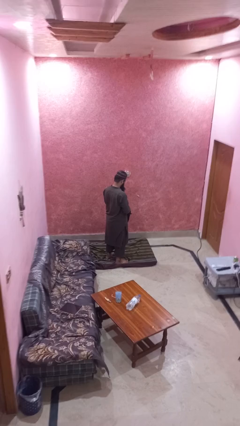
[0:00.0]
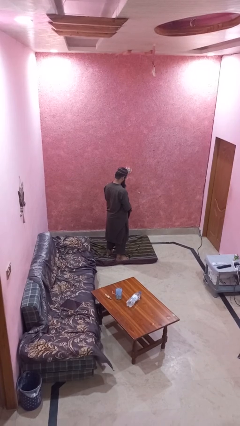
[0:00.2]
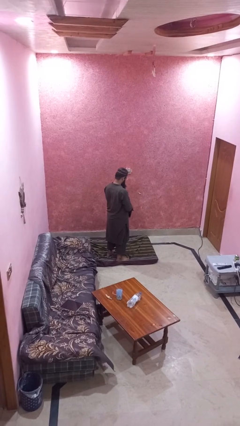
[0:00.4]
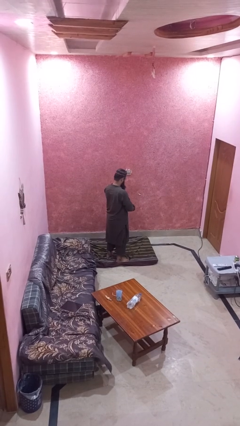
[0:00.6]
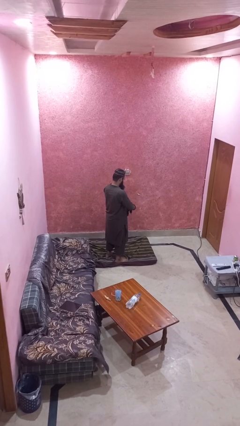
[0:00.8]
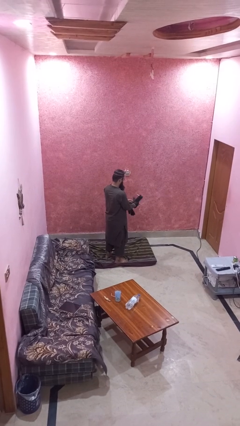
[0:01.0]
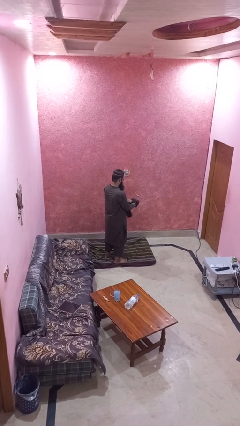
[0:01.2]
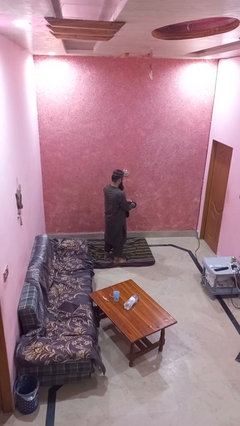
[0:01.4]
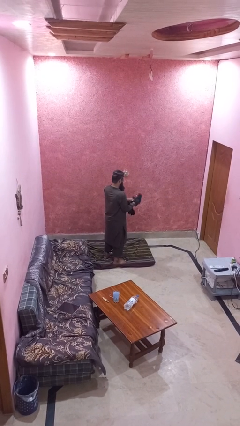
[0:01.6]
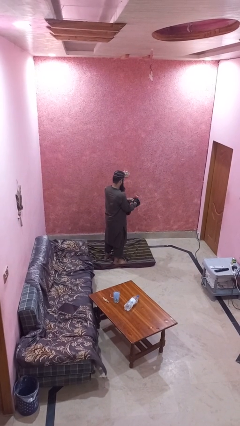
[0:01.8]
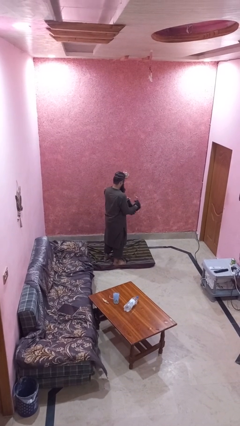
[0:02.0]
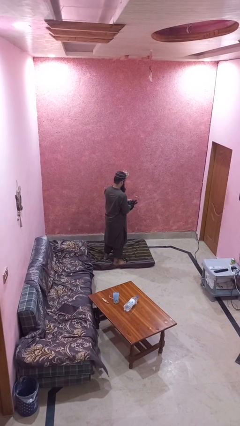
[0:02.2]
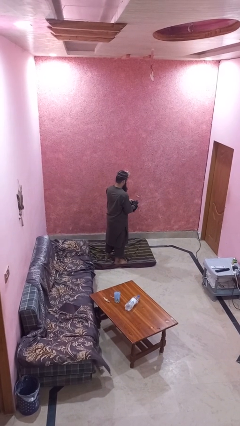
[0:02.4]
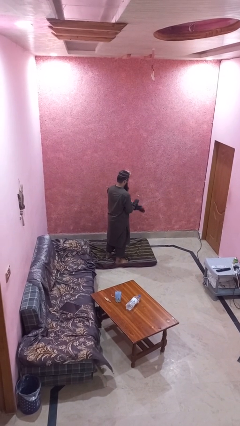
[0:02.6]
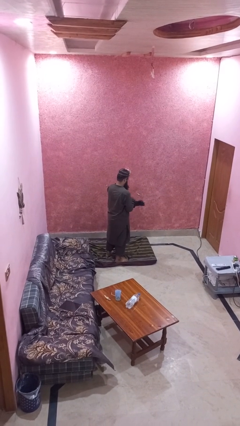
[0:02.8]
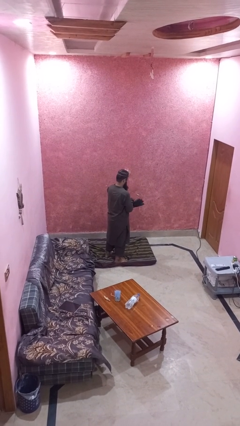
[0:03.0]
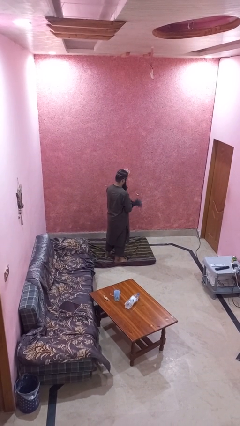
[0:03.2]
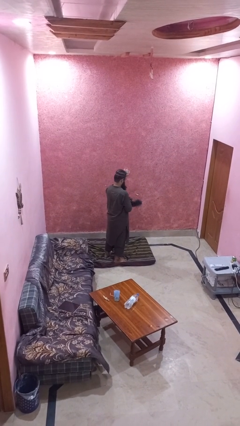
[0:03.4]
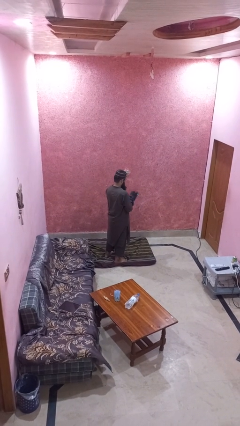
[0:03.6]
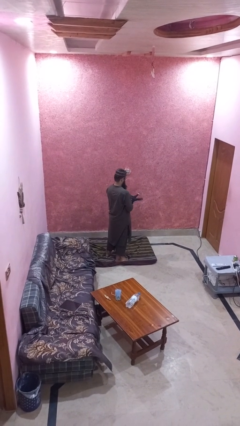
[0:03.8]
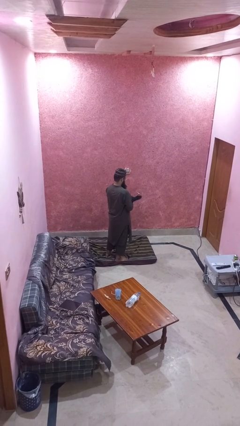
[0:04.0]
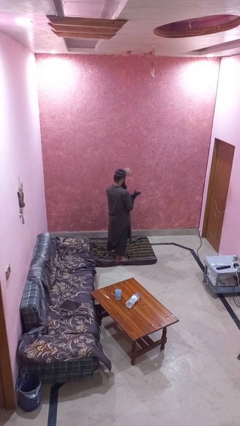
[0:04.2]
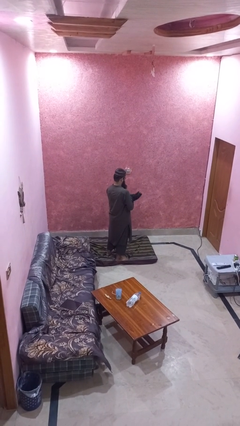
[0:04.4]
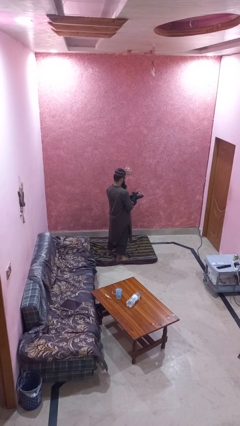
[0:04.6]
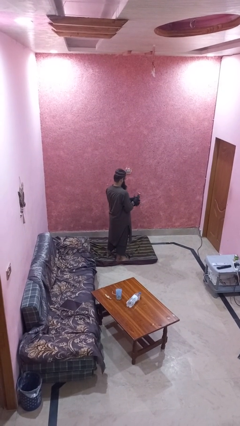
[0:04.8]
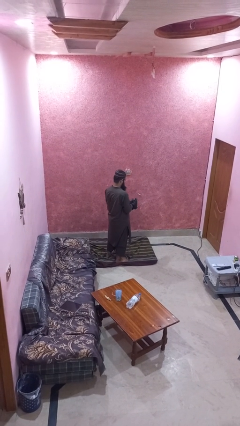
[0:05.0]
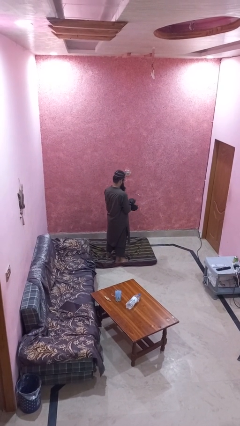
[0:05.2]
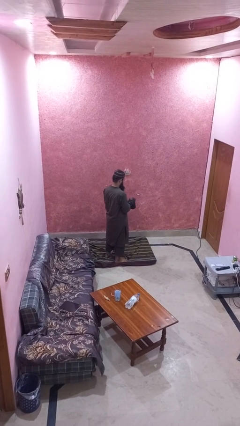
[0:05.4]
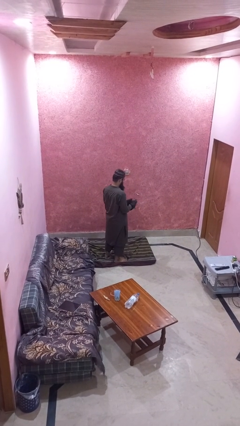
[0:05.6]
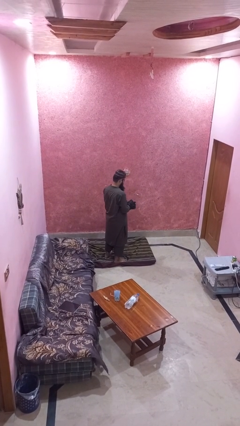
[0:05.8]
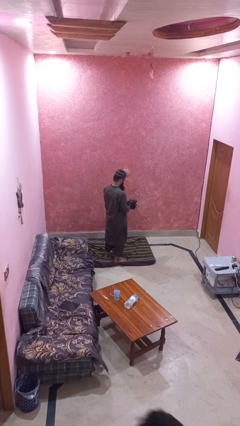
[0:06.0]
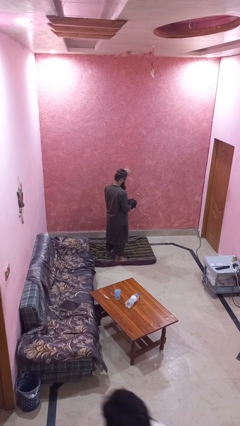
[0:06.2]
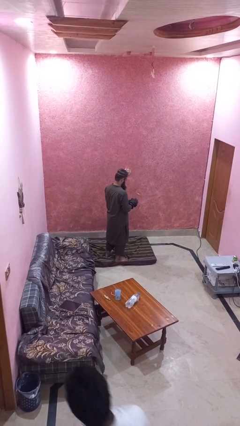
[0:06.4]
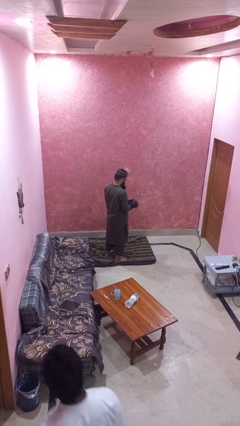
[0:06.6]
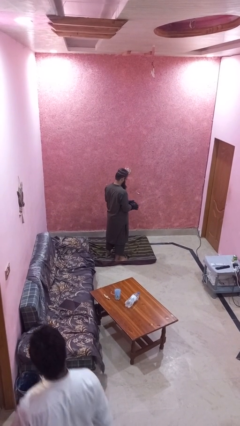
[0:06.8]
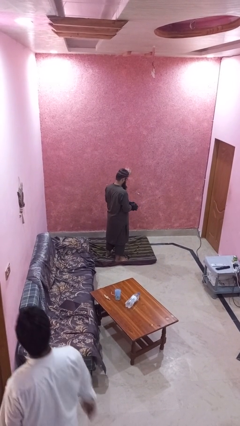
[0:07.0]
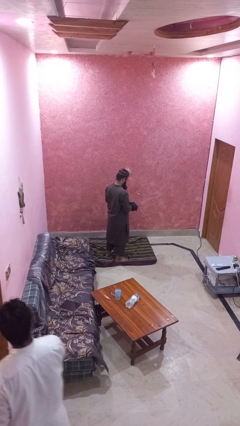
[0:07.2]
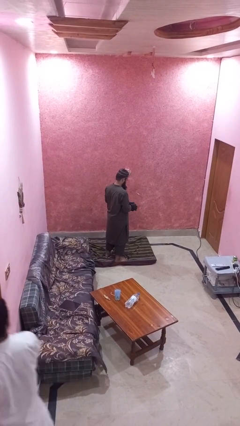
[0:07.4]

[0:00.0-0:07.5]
person puts on gloves

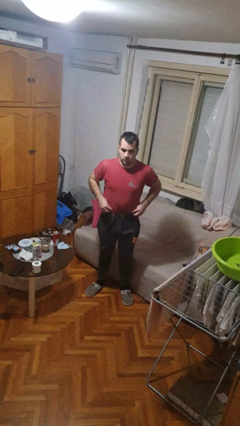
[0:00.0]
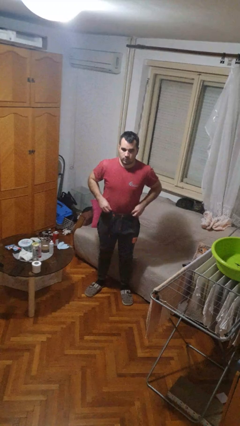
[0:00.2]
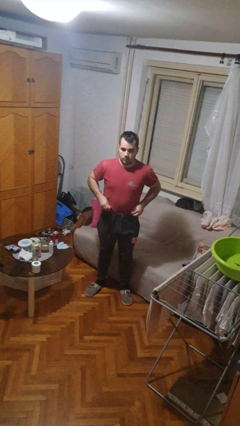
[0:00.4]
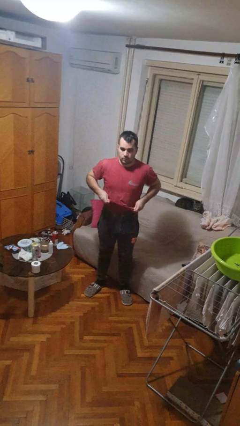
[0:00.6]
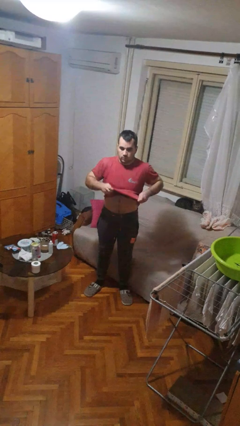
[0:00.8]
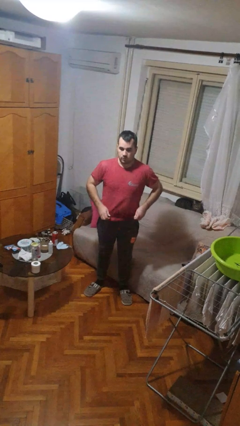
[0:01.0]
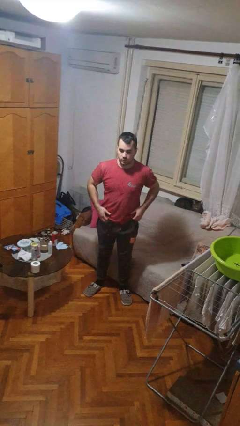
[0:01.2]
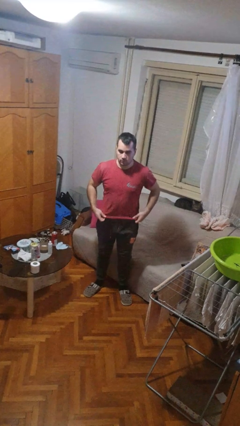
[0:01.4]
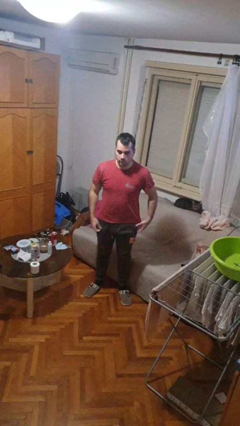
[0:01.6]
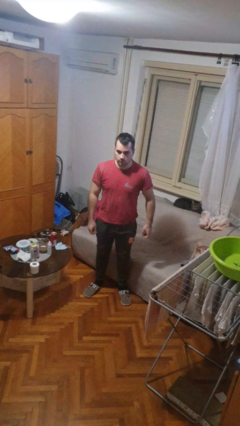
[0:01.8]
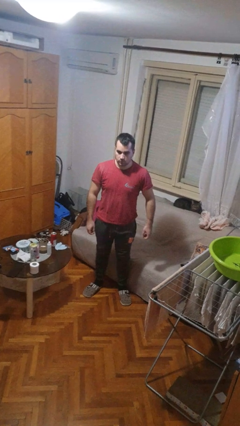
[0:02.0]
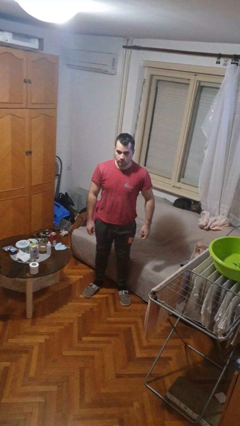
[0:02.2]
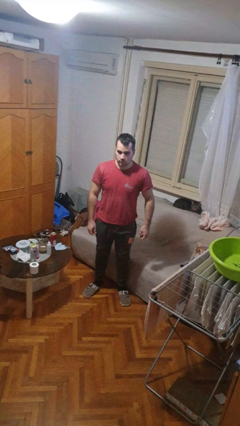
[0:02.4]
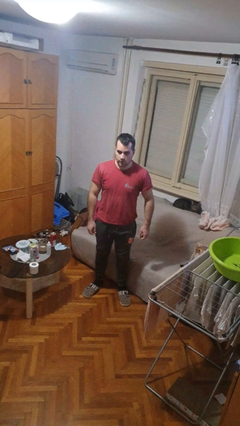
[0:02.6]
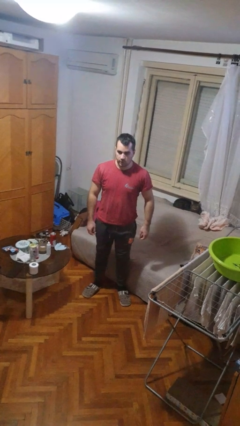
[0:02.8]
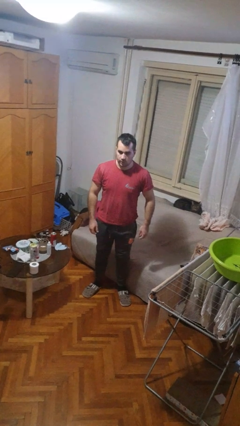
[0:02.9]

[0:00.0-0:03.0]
person untucks shirt

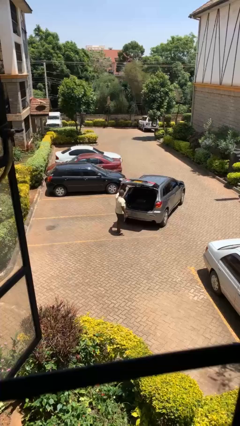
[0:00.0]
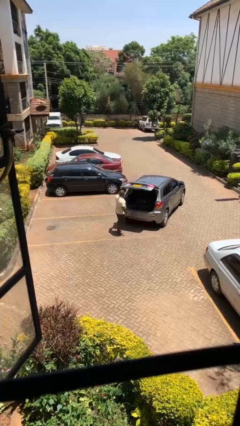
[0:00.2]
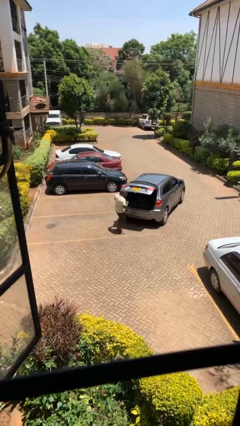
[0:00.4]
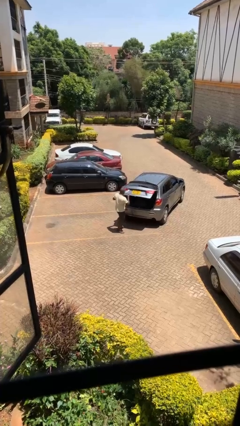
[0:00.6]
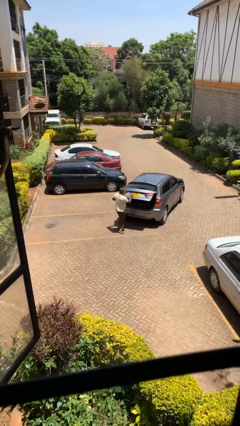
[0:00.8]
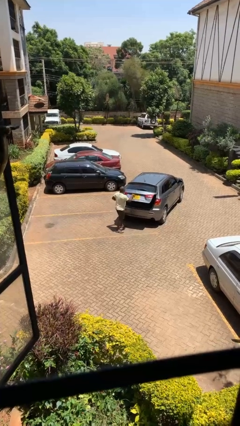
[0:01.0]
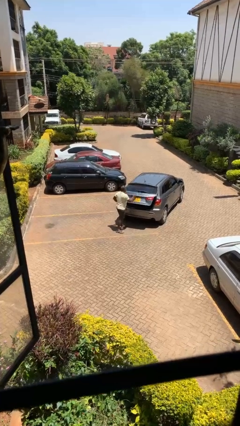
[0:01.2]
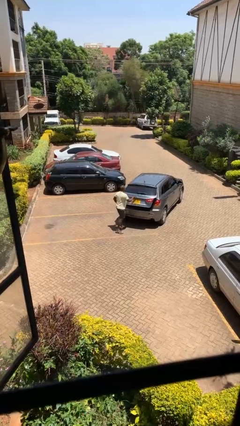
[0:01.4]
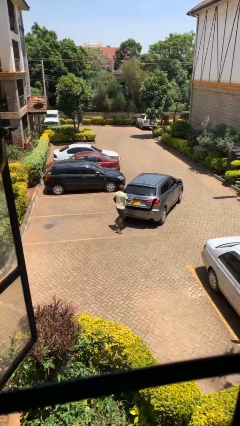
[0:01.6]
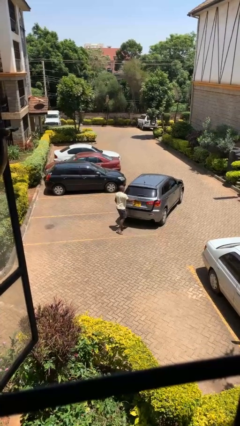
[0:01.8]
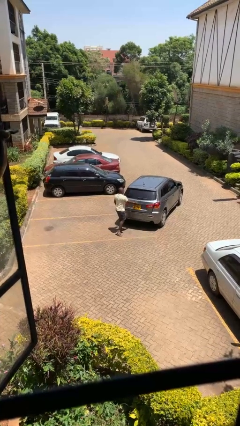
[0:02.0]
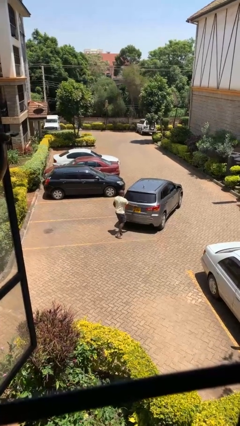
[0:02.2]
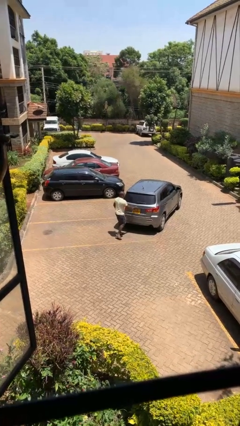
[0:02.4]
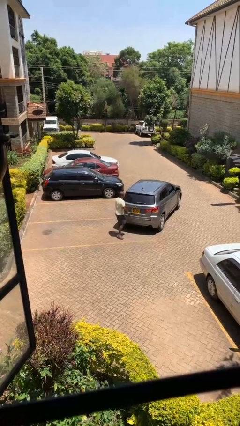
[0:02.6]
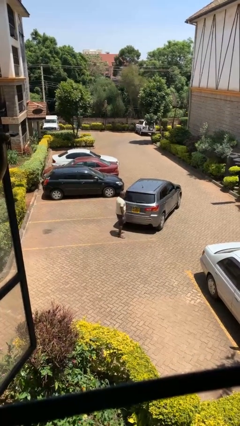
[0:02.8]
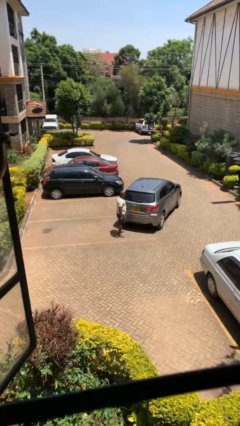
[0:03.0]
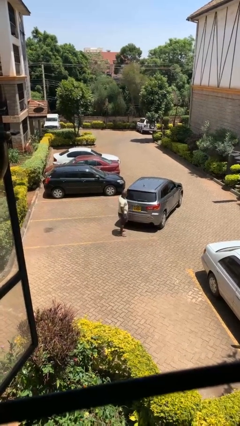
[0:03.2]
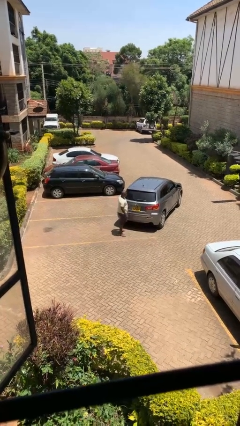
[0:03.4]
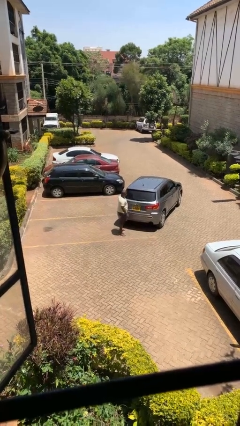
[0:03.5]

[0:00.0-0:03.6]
person closes car trunk

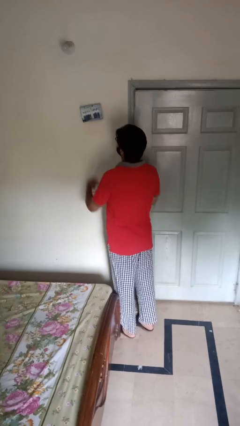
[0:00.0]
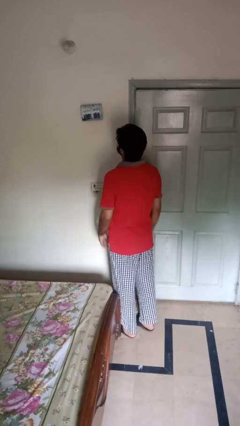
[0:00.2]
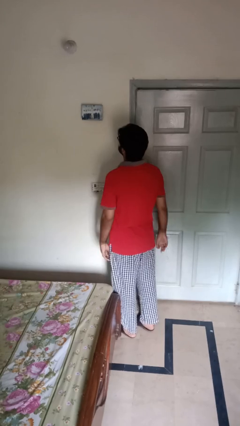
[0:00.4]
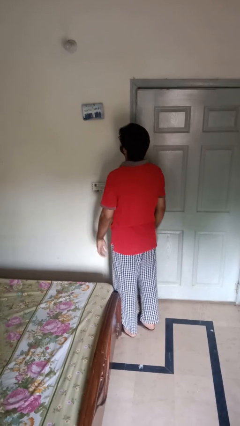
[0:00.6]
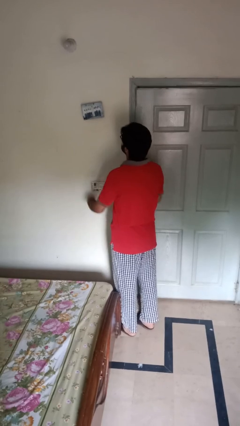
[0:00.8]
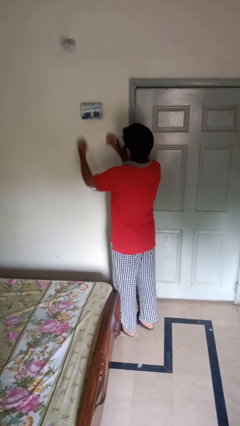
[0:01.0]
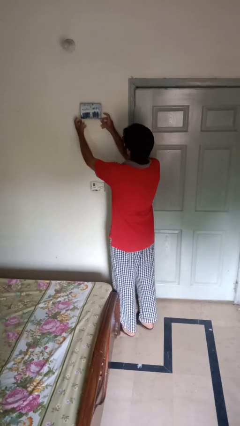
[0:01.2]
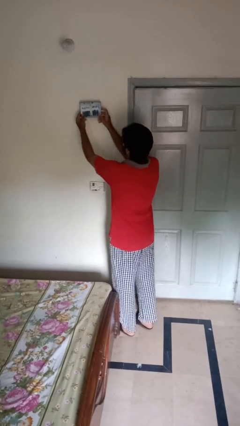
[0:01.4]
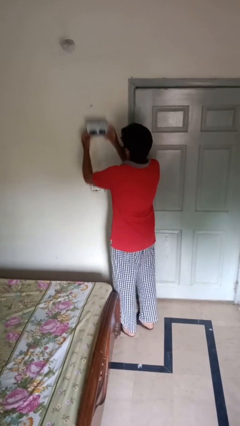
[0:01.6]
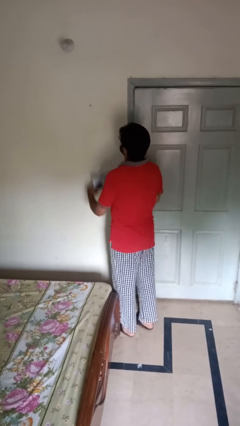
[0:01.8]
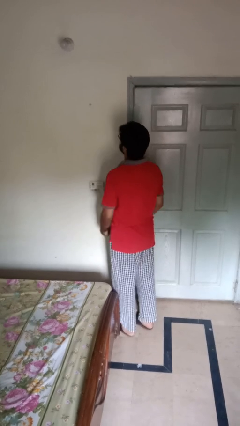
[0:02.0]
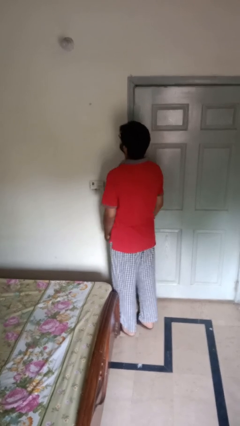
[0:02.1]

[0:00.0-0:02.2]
person takes down picture frame

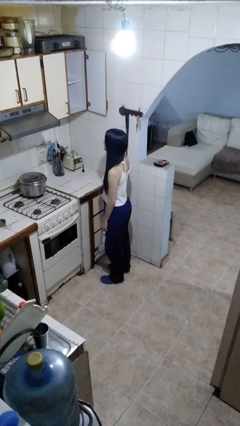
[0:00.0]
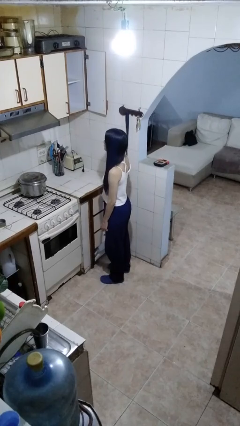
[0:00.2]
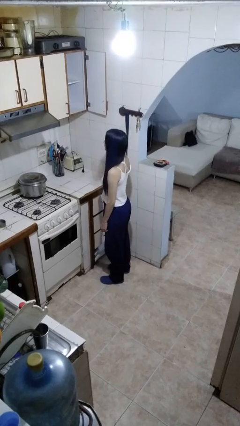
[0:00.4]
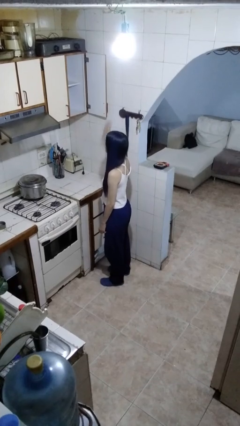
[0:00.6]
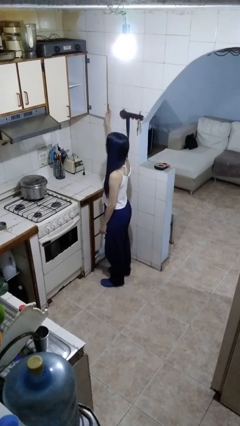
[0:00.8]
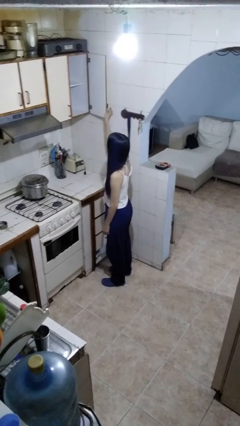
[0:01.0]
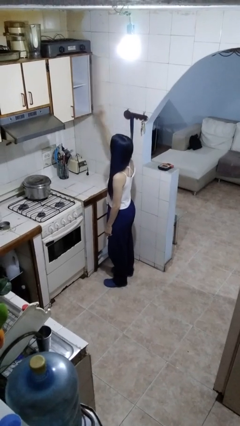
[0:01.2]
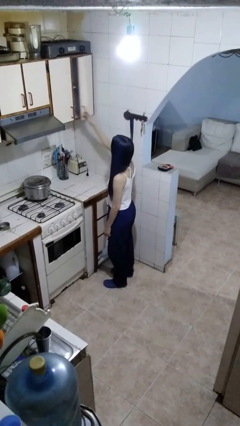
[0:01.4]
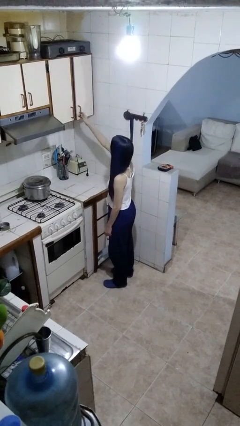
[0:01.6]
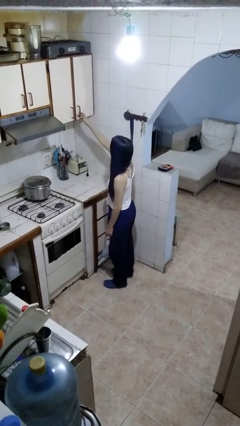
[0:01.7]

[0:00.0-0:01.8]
person closes cabinet
